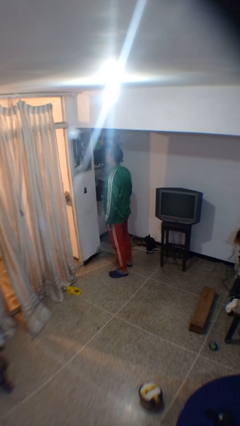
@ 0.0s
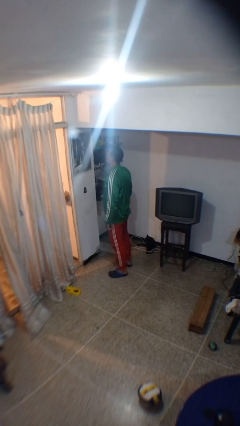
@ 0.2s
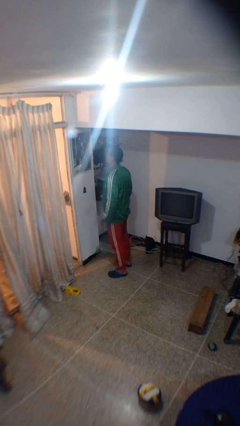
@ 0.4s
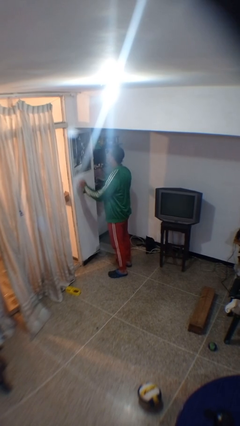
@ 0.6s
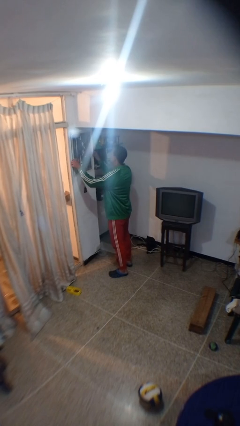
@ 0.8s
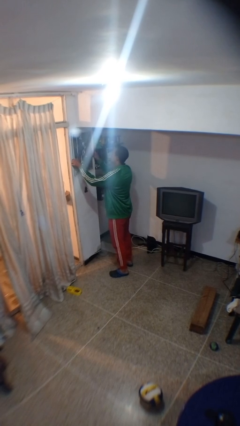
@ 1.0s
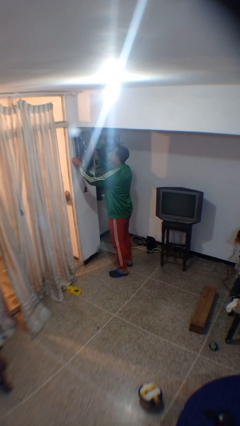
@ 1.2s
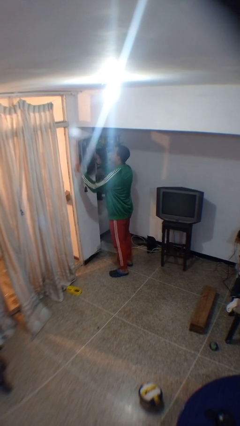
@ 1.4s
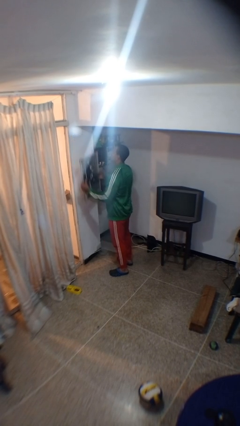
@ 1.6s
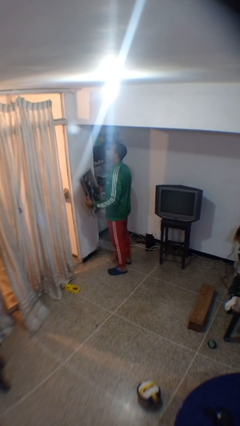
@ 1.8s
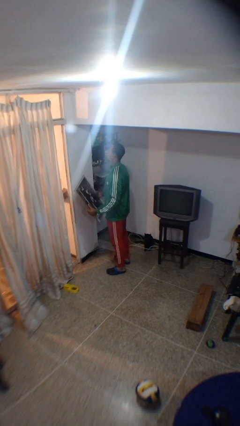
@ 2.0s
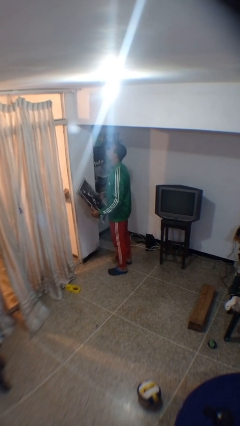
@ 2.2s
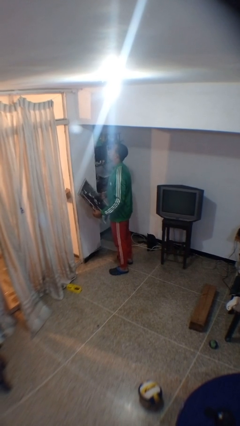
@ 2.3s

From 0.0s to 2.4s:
person takes down picture frame

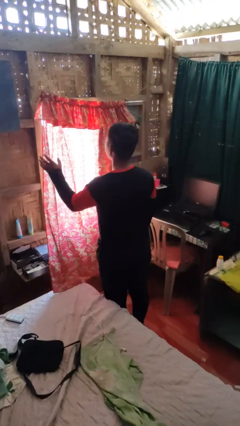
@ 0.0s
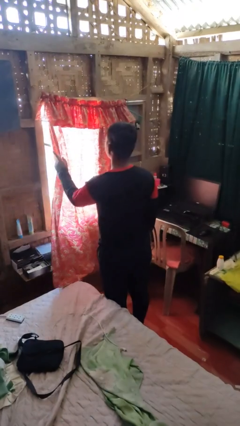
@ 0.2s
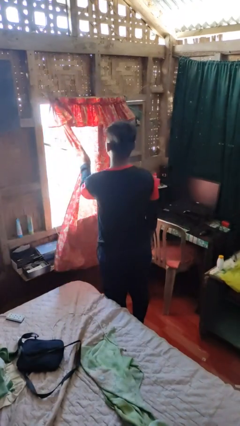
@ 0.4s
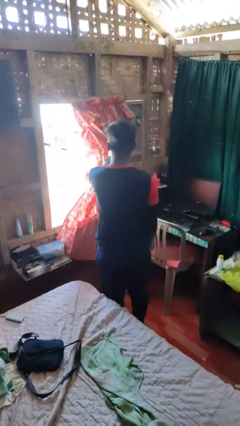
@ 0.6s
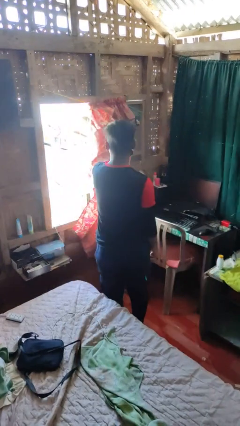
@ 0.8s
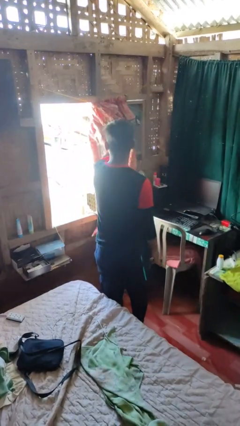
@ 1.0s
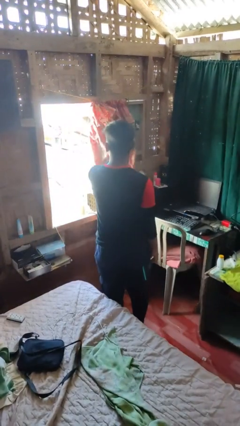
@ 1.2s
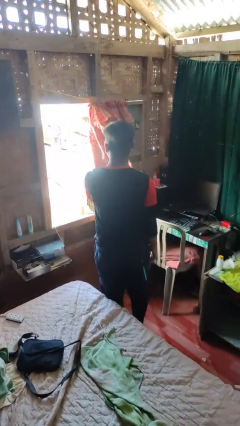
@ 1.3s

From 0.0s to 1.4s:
person opens curtains

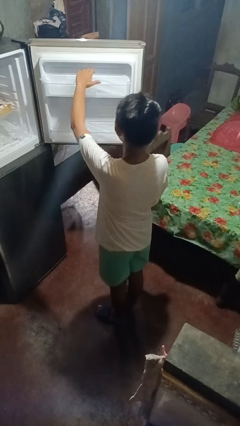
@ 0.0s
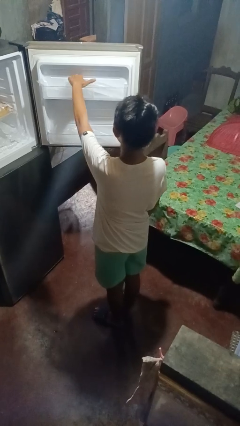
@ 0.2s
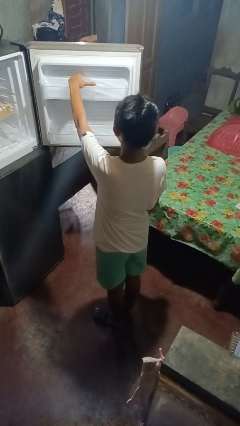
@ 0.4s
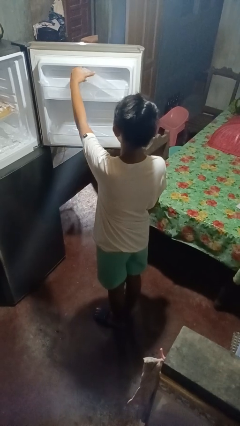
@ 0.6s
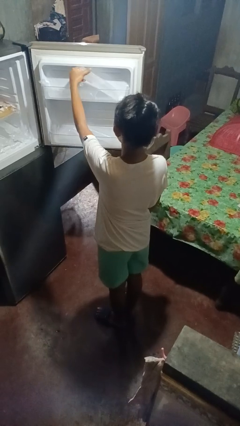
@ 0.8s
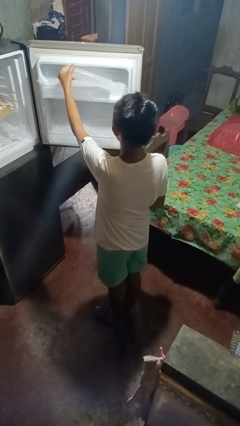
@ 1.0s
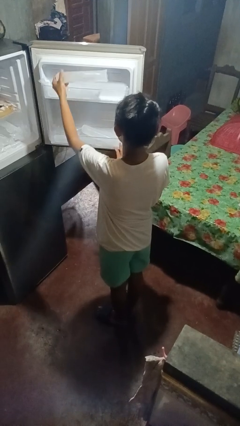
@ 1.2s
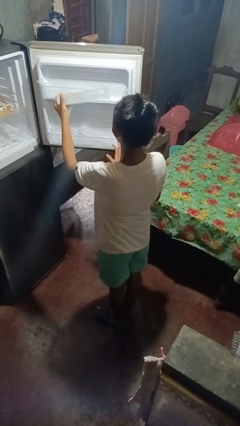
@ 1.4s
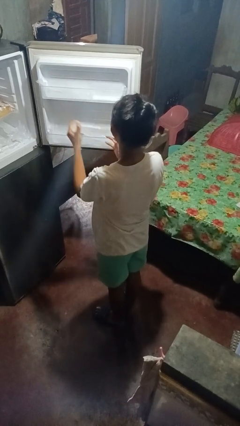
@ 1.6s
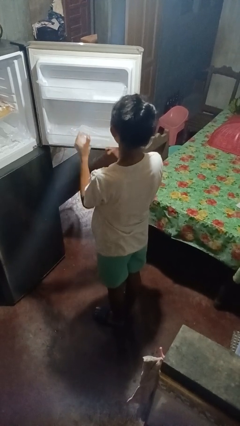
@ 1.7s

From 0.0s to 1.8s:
person takes object from refrigerator

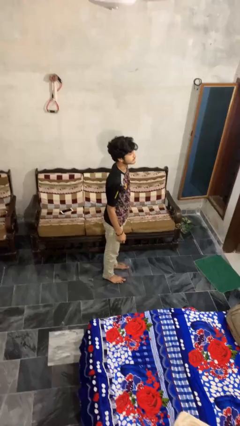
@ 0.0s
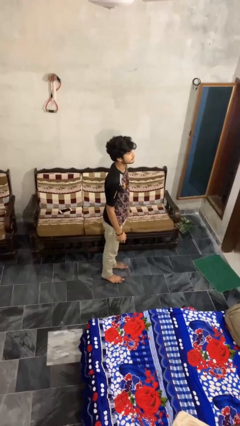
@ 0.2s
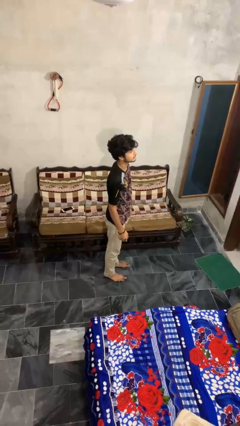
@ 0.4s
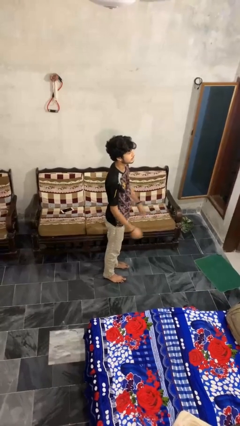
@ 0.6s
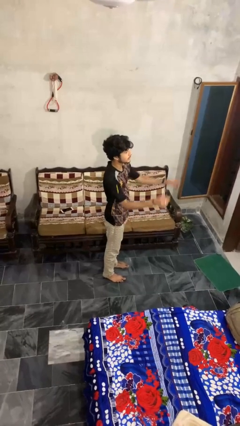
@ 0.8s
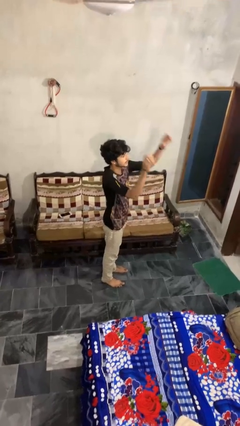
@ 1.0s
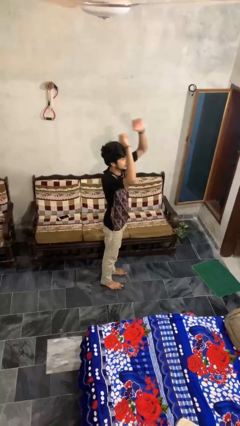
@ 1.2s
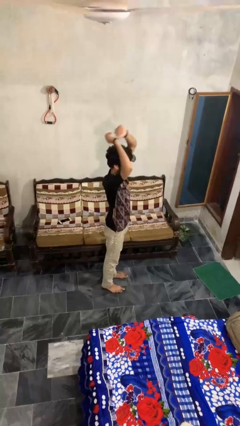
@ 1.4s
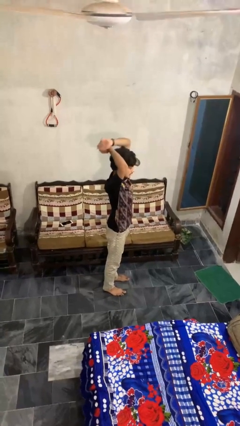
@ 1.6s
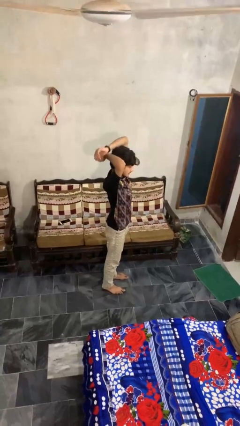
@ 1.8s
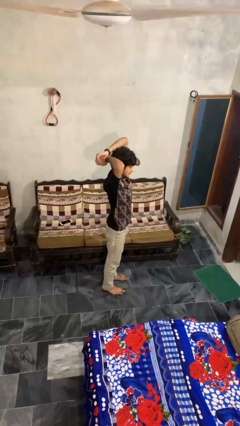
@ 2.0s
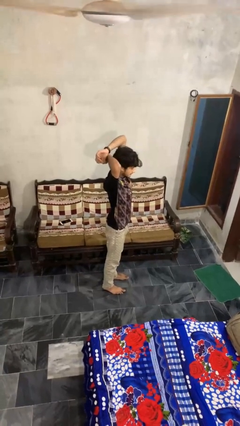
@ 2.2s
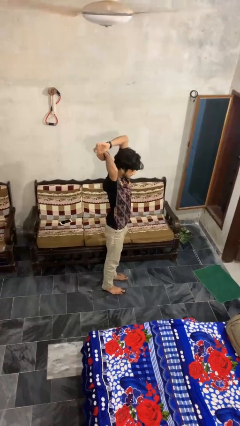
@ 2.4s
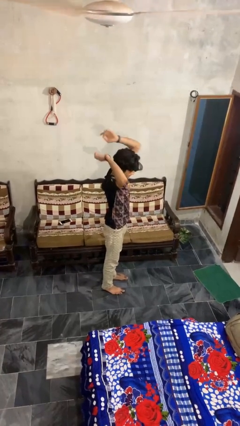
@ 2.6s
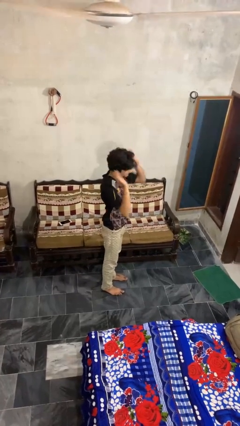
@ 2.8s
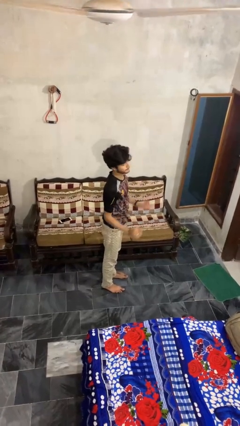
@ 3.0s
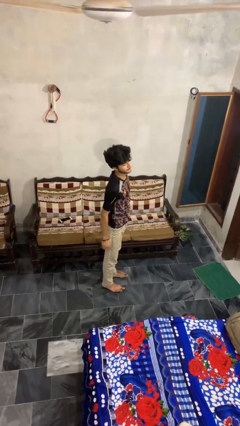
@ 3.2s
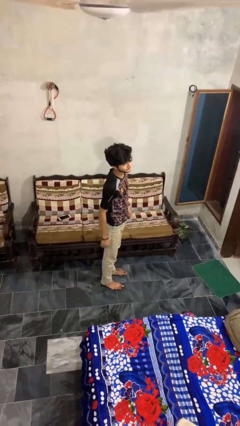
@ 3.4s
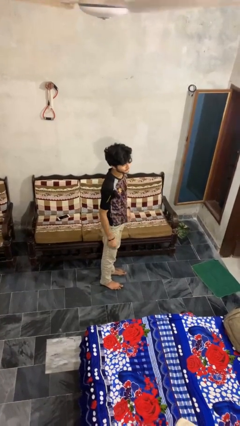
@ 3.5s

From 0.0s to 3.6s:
person stretches arms over head

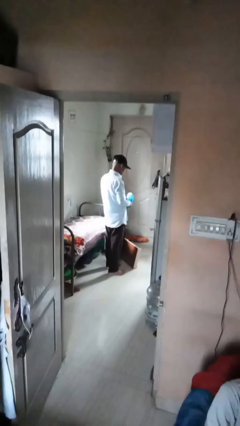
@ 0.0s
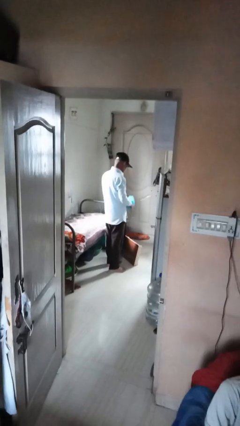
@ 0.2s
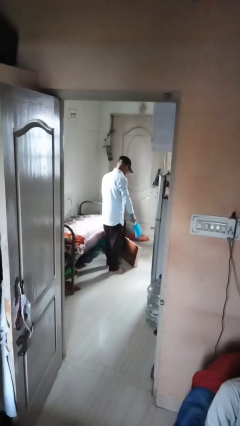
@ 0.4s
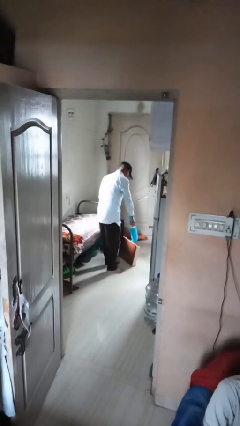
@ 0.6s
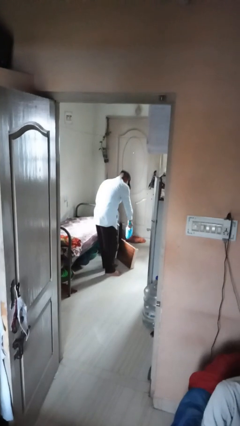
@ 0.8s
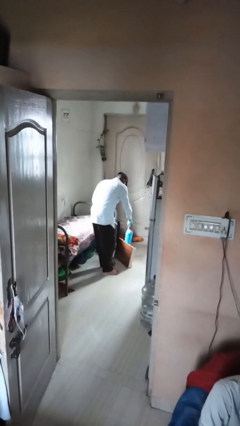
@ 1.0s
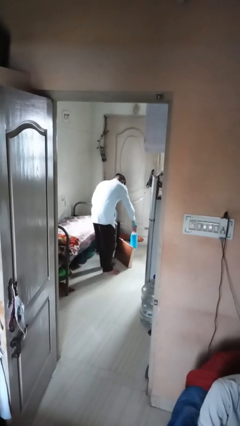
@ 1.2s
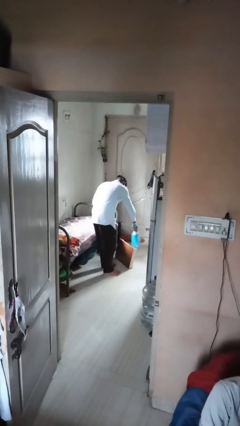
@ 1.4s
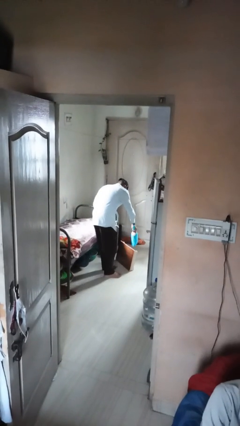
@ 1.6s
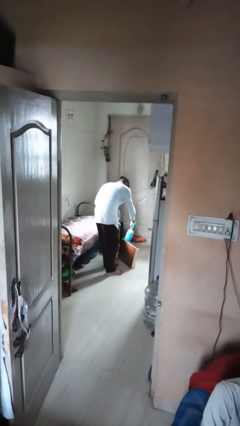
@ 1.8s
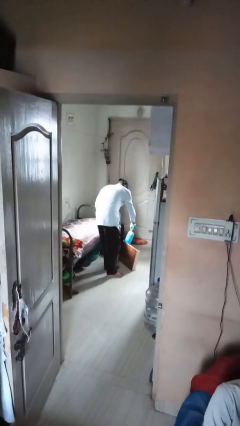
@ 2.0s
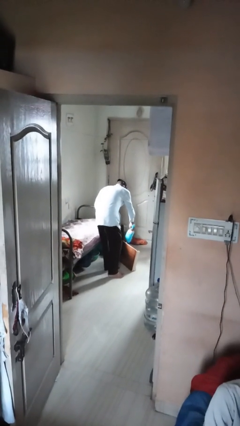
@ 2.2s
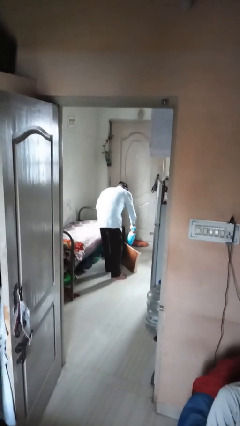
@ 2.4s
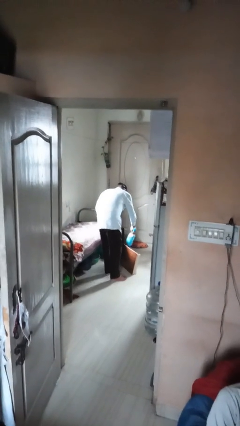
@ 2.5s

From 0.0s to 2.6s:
person dusts furniture

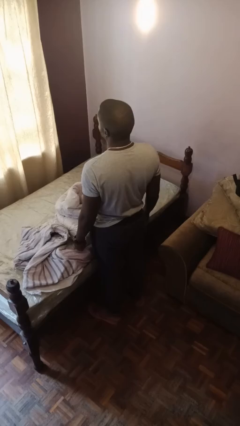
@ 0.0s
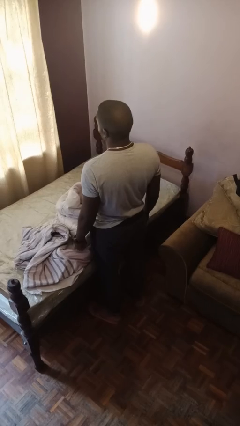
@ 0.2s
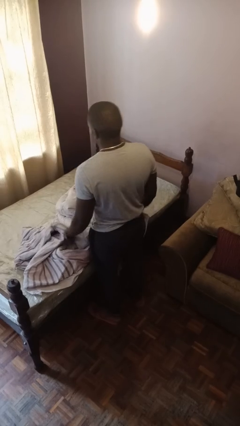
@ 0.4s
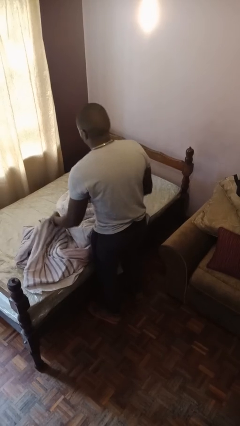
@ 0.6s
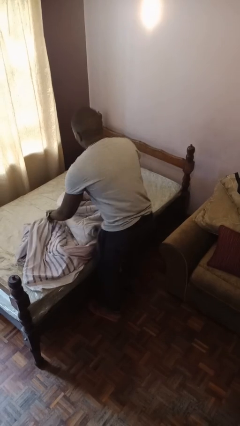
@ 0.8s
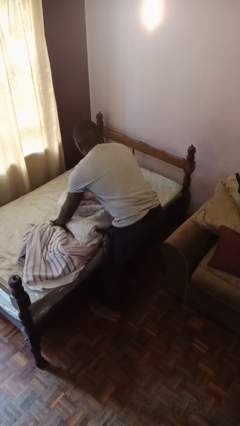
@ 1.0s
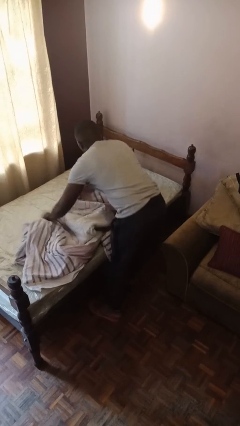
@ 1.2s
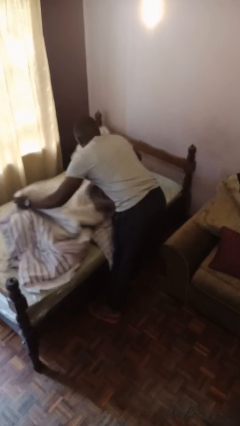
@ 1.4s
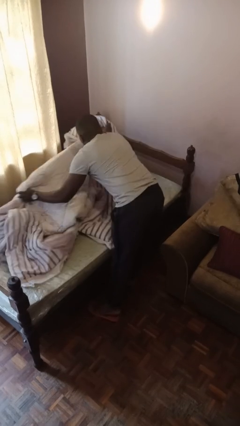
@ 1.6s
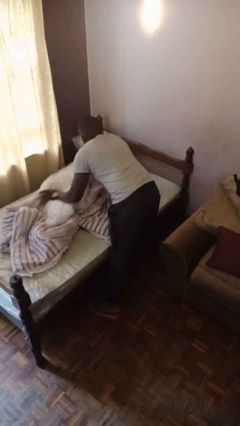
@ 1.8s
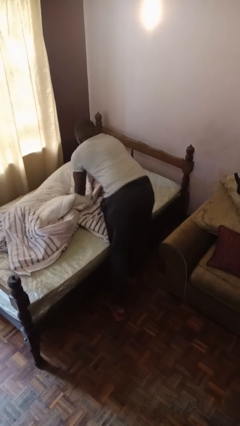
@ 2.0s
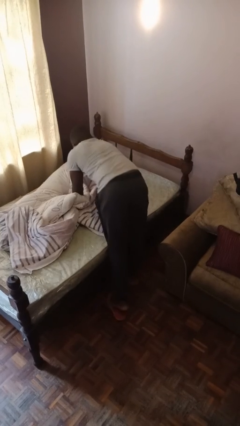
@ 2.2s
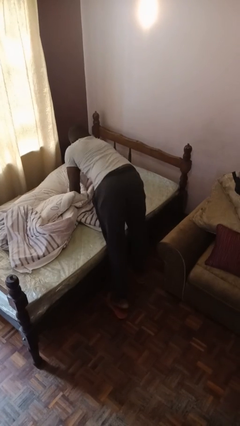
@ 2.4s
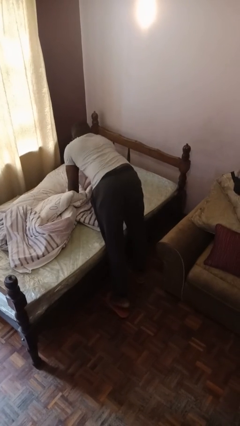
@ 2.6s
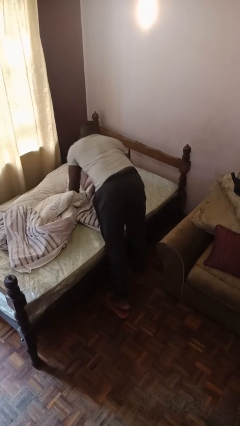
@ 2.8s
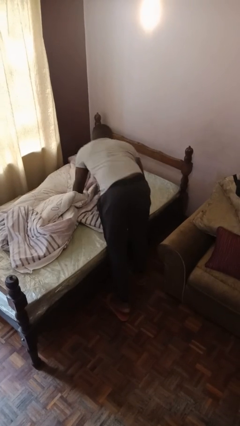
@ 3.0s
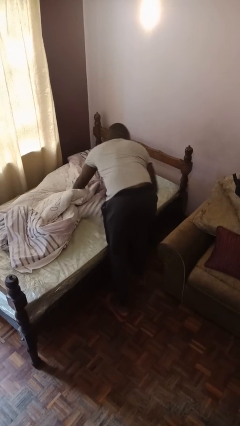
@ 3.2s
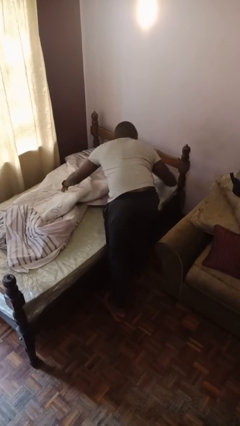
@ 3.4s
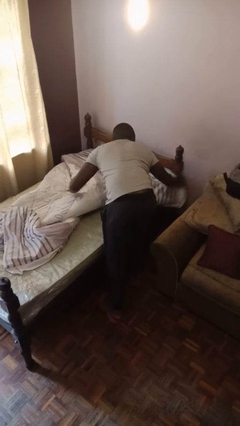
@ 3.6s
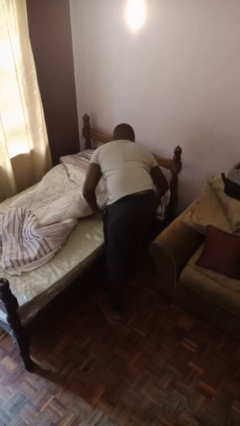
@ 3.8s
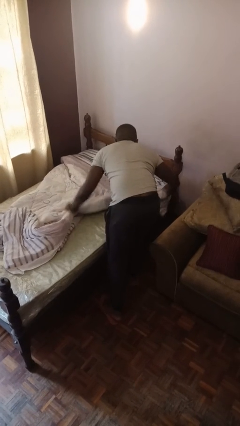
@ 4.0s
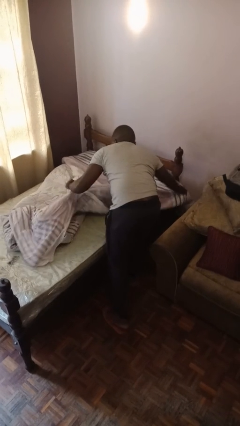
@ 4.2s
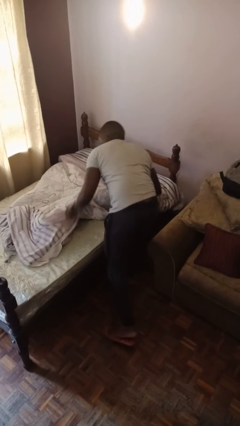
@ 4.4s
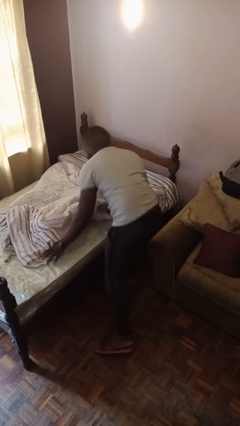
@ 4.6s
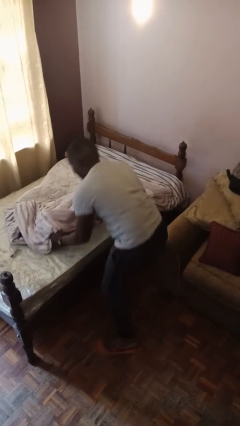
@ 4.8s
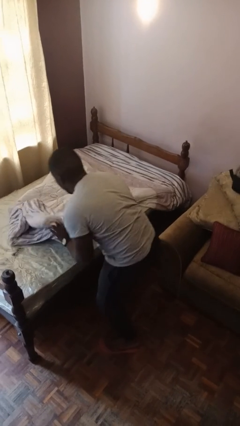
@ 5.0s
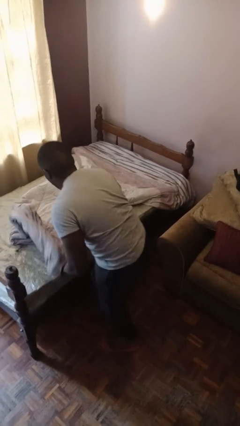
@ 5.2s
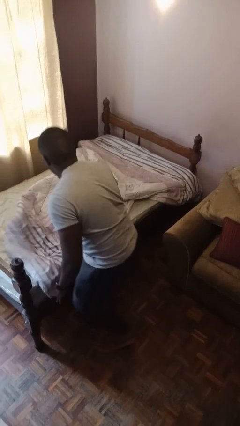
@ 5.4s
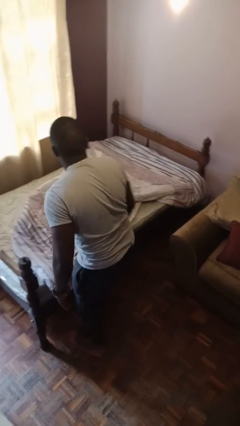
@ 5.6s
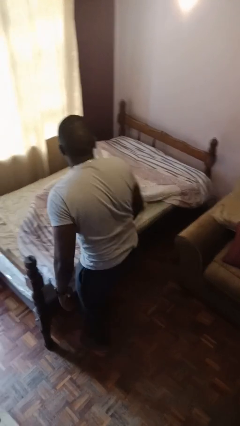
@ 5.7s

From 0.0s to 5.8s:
person makes bed
